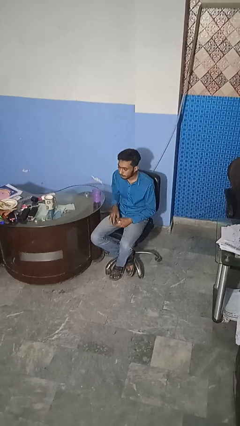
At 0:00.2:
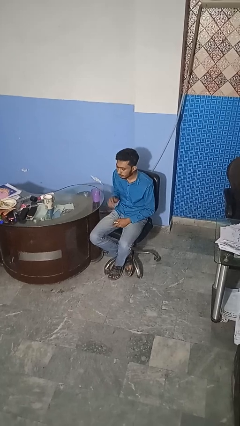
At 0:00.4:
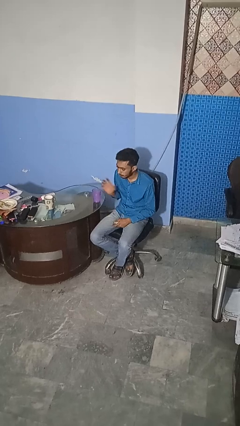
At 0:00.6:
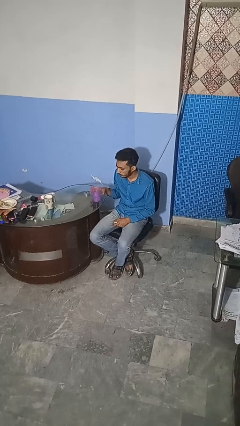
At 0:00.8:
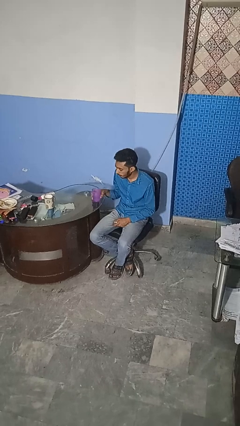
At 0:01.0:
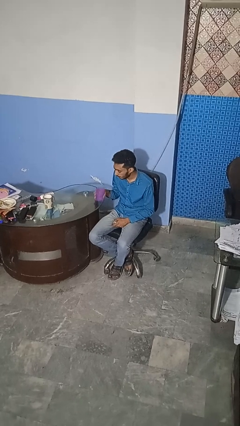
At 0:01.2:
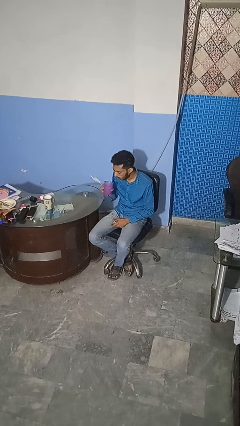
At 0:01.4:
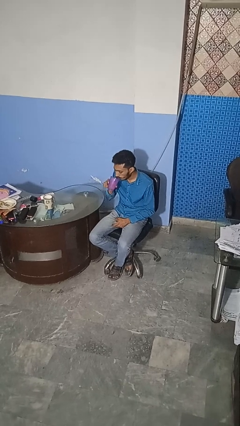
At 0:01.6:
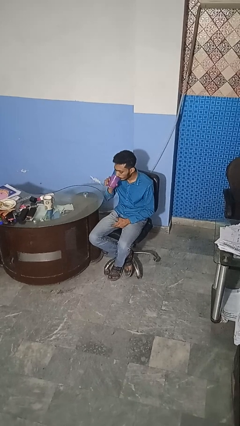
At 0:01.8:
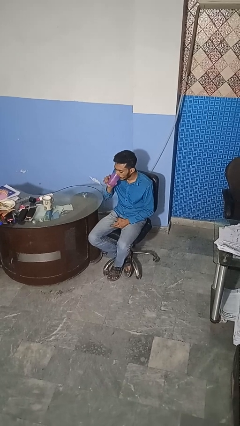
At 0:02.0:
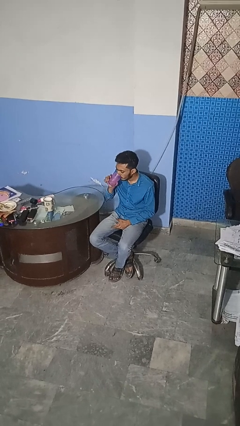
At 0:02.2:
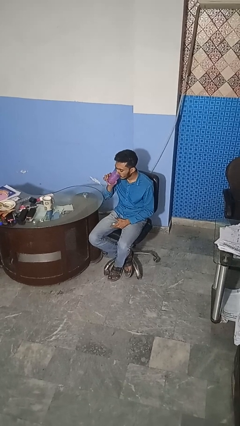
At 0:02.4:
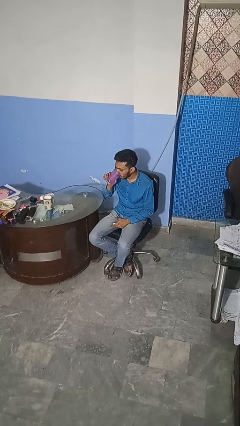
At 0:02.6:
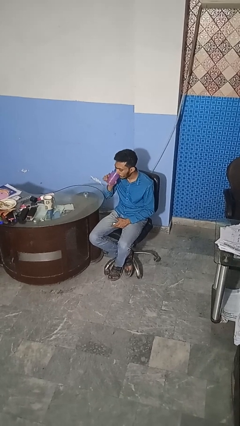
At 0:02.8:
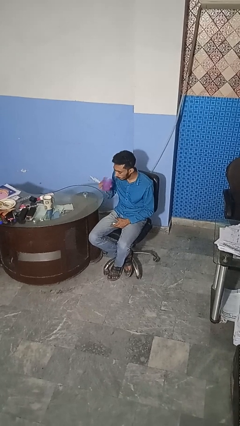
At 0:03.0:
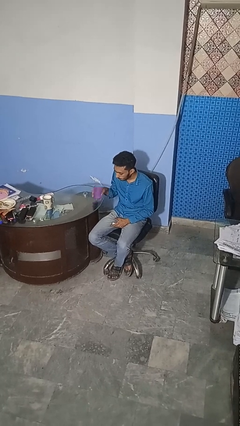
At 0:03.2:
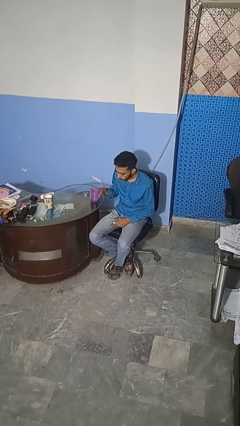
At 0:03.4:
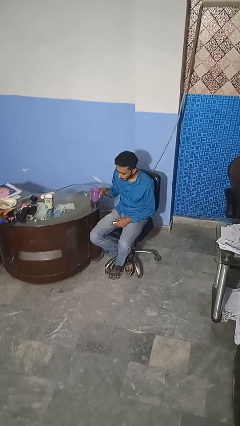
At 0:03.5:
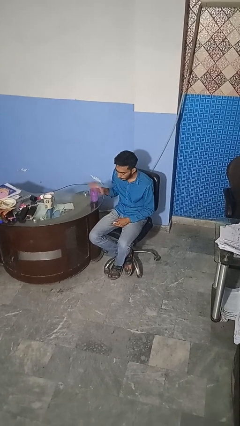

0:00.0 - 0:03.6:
person drinks from cup

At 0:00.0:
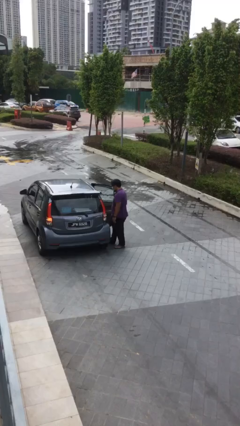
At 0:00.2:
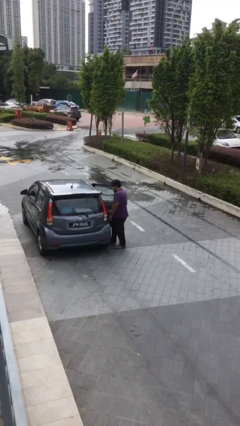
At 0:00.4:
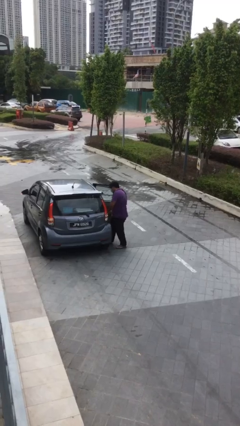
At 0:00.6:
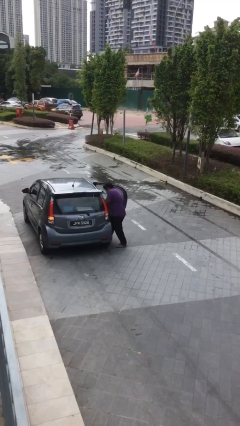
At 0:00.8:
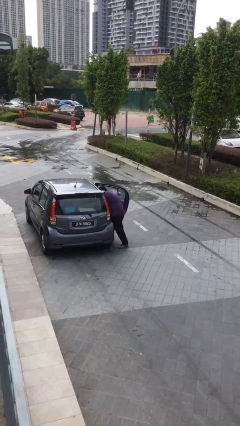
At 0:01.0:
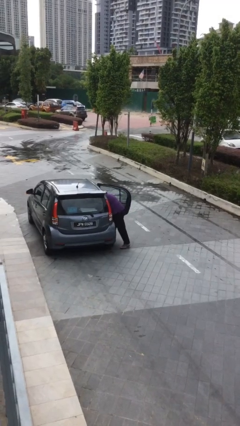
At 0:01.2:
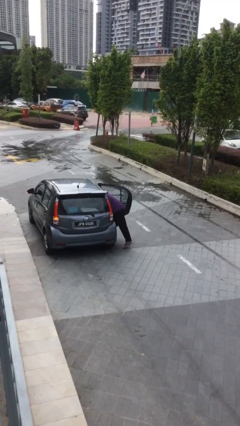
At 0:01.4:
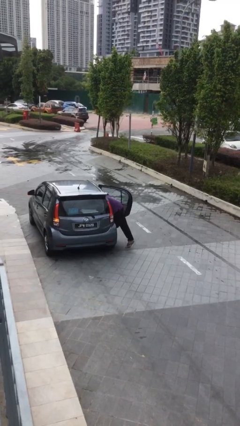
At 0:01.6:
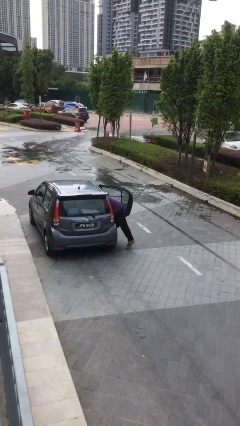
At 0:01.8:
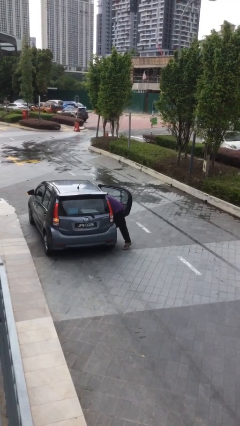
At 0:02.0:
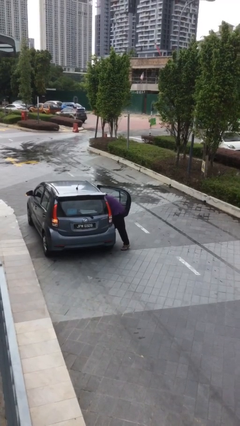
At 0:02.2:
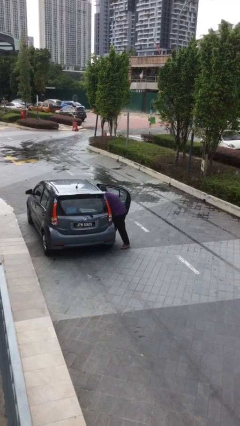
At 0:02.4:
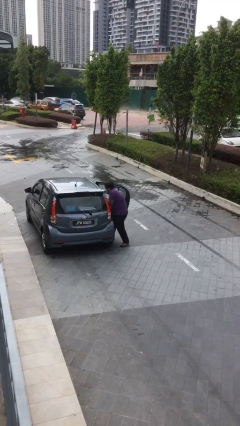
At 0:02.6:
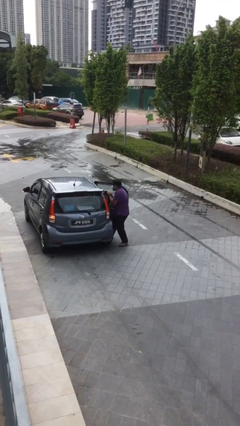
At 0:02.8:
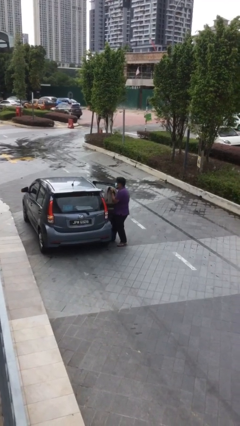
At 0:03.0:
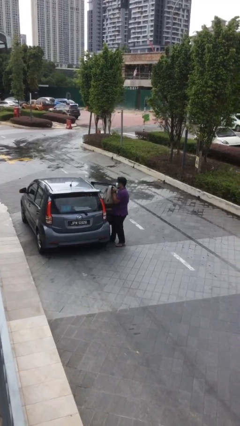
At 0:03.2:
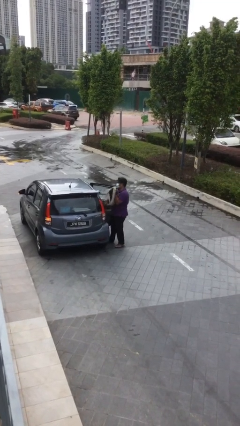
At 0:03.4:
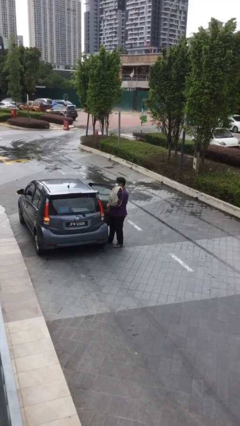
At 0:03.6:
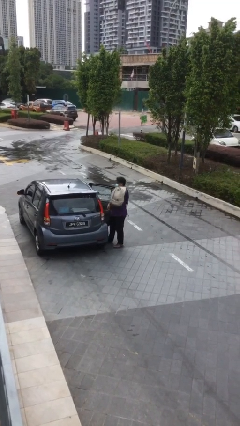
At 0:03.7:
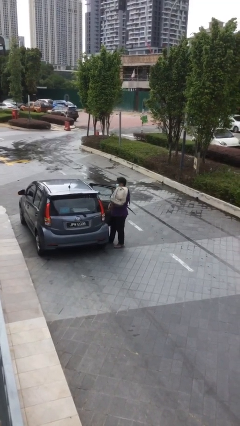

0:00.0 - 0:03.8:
person unloads car

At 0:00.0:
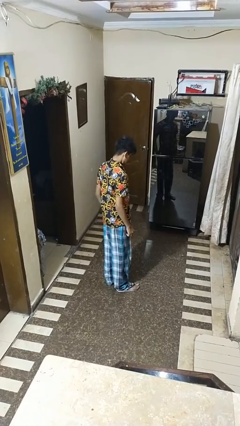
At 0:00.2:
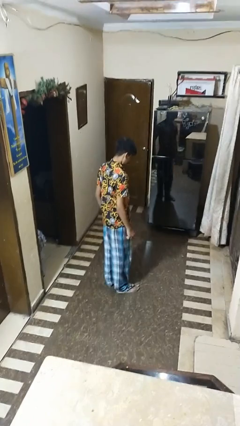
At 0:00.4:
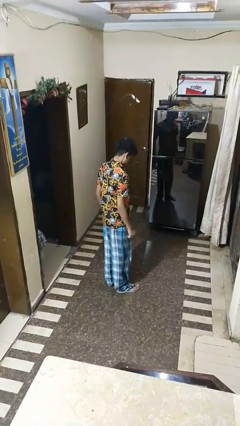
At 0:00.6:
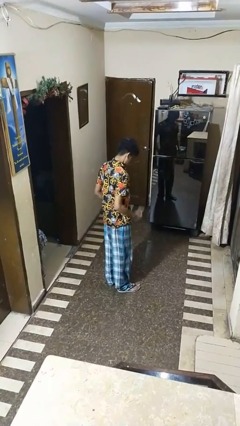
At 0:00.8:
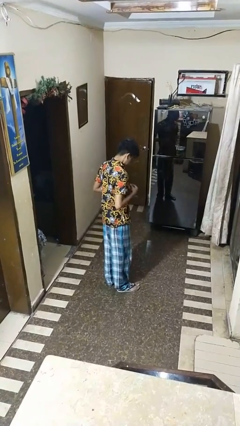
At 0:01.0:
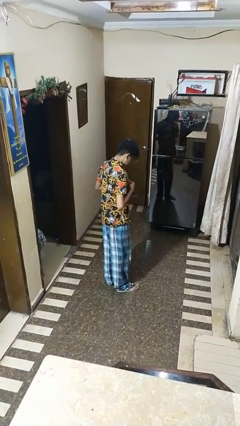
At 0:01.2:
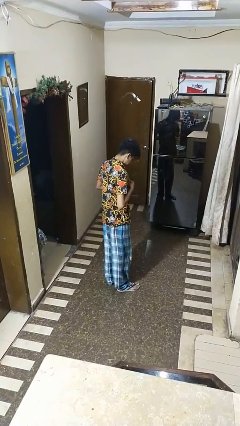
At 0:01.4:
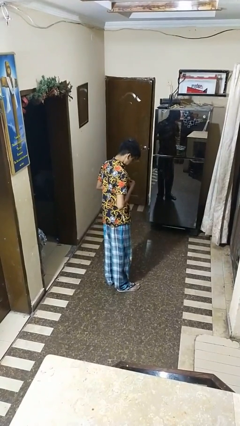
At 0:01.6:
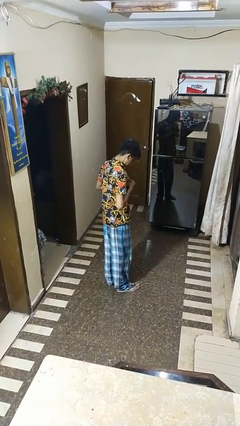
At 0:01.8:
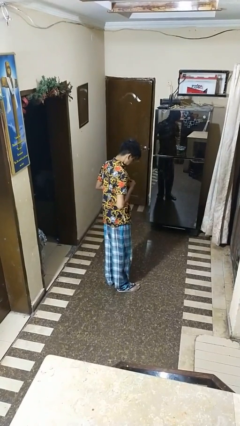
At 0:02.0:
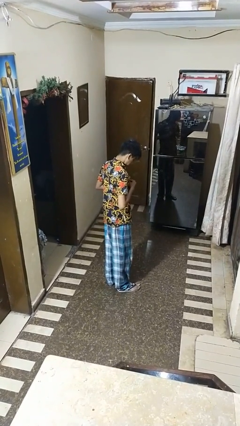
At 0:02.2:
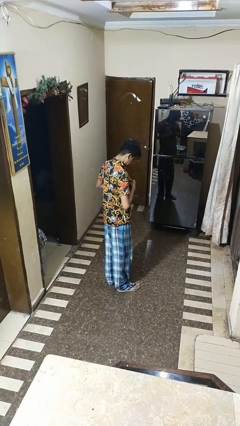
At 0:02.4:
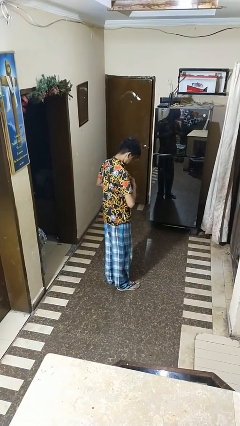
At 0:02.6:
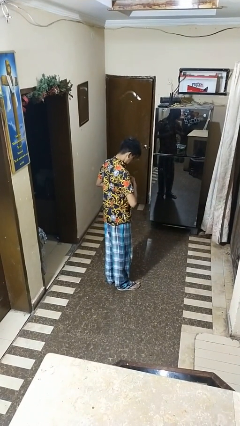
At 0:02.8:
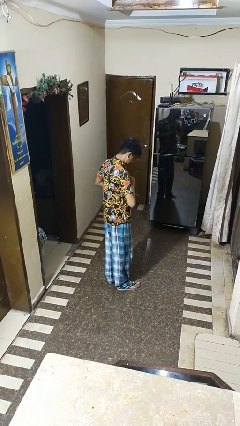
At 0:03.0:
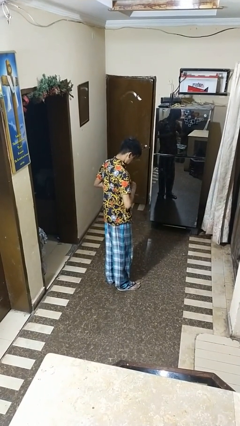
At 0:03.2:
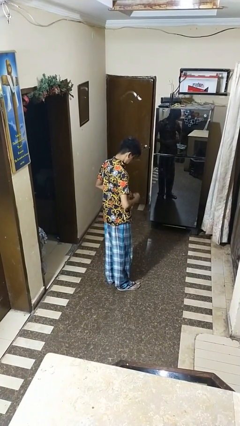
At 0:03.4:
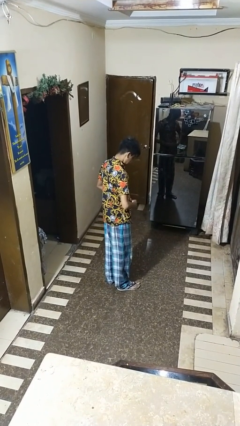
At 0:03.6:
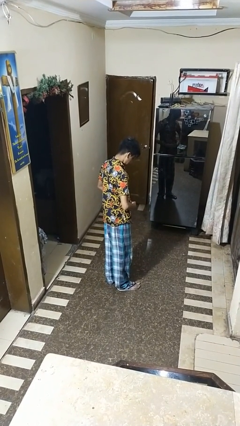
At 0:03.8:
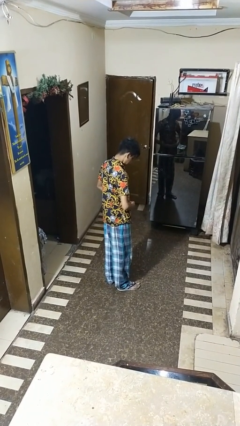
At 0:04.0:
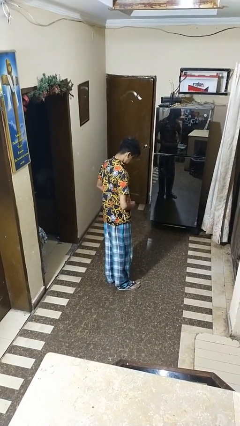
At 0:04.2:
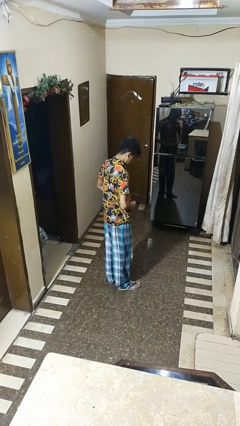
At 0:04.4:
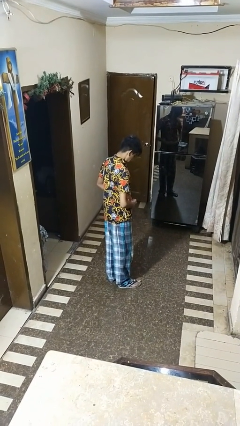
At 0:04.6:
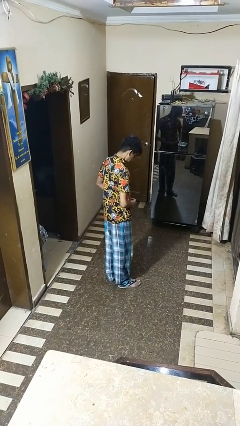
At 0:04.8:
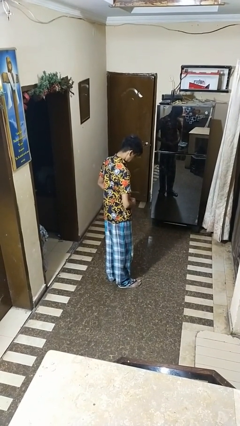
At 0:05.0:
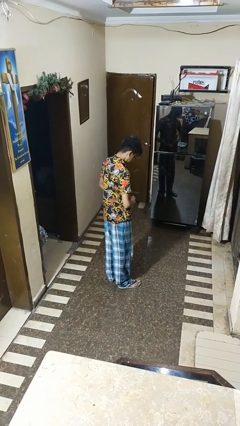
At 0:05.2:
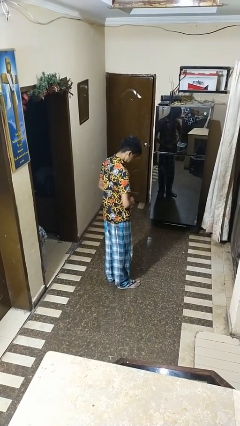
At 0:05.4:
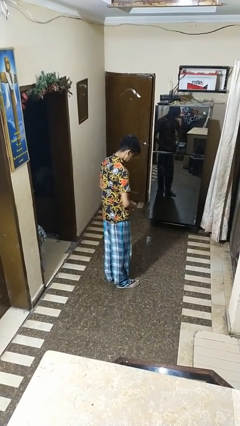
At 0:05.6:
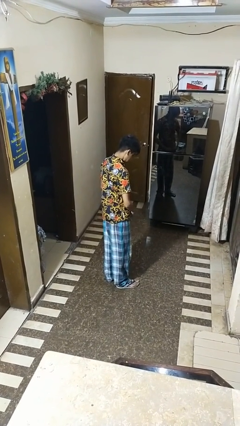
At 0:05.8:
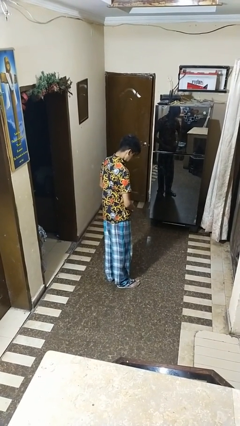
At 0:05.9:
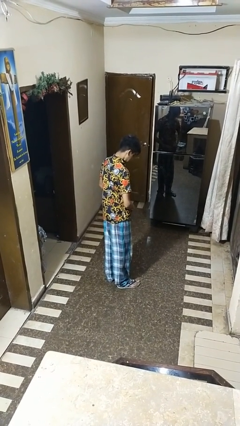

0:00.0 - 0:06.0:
person buttons shirt

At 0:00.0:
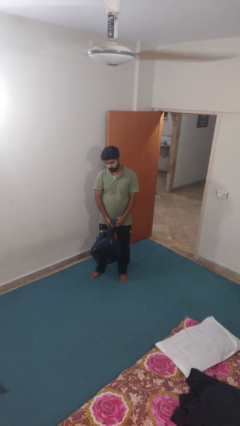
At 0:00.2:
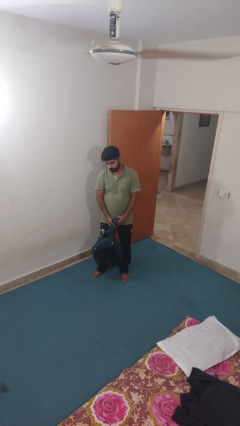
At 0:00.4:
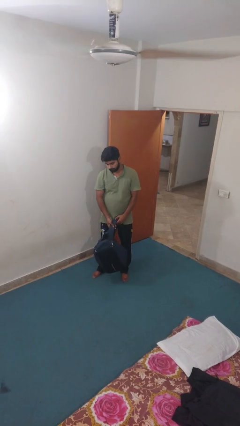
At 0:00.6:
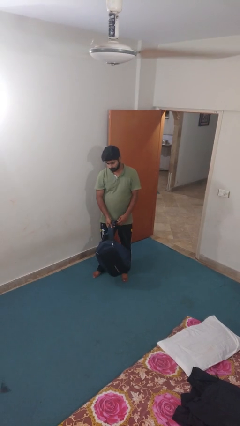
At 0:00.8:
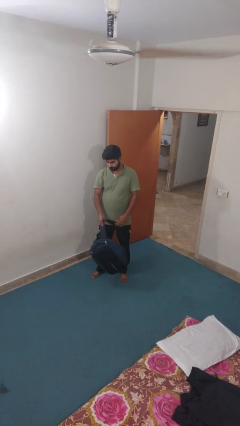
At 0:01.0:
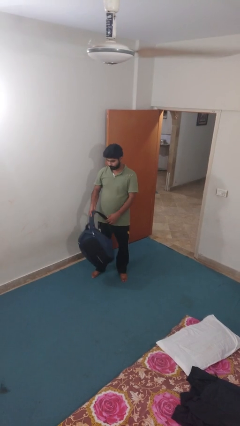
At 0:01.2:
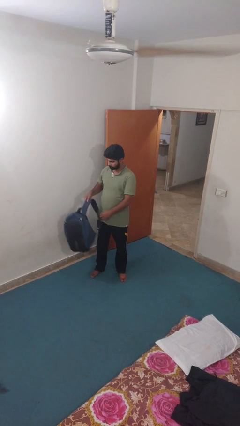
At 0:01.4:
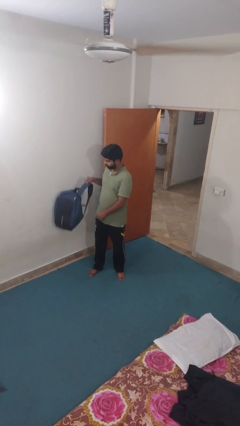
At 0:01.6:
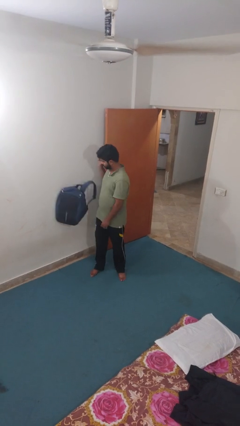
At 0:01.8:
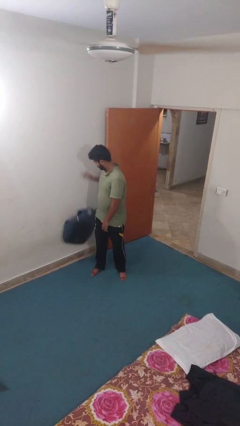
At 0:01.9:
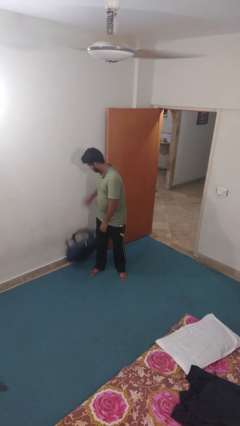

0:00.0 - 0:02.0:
person drops object

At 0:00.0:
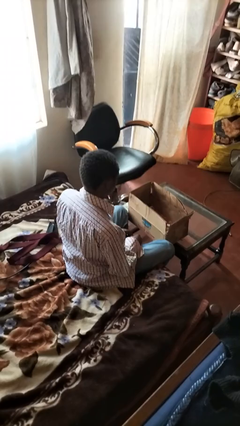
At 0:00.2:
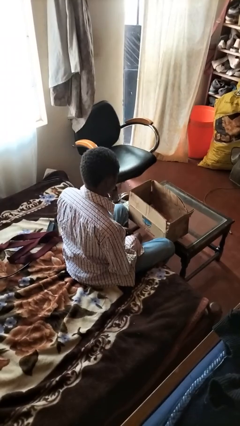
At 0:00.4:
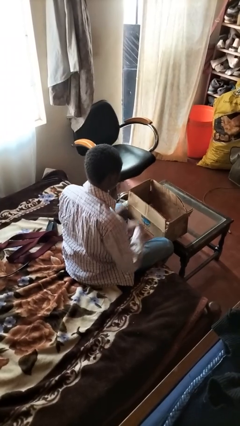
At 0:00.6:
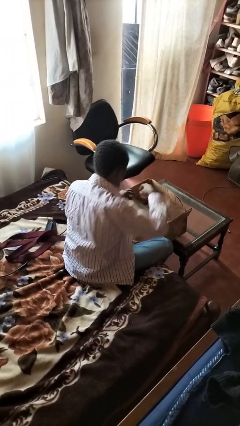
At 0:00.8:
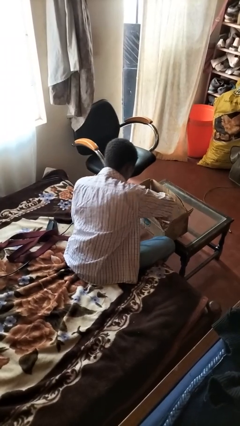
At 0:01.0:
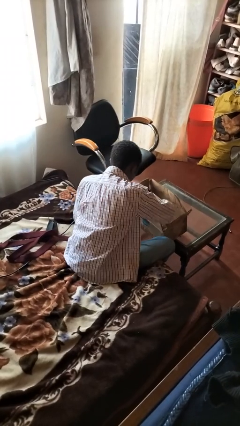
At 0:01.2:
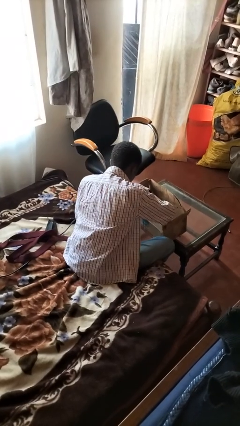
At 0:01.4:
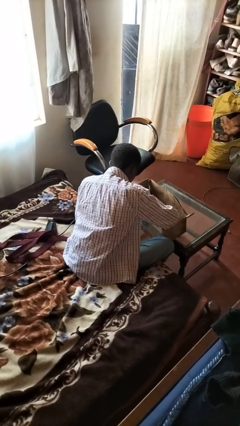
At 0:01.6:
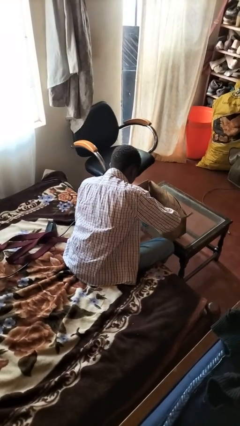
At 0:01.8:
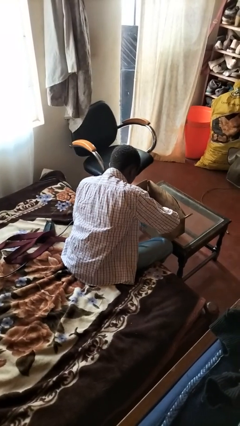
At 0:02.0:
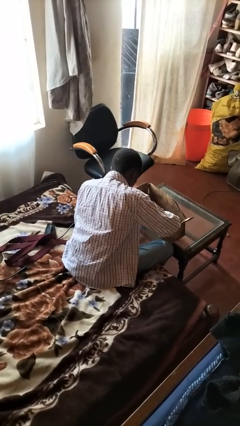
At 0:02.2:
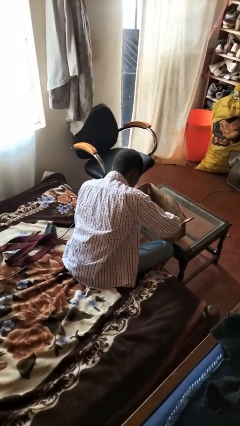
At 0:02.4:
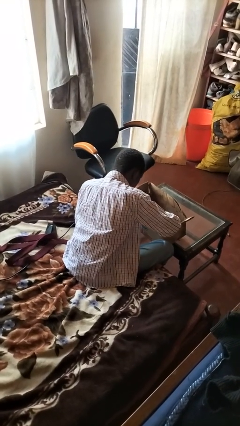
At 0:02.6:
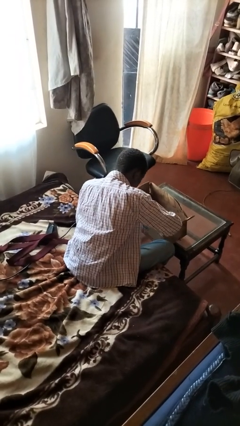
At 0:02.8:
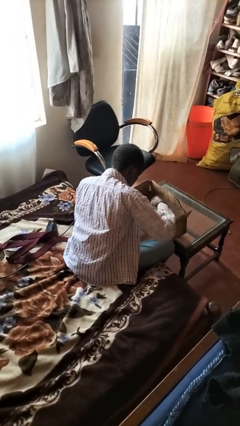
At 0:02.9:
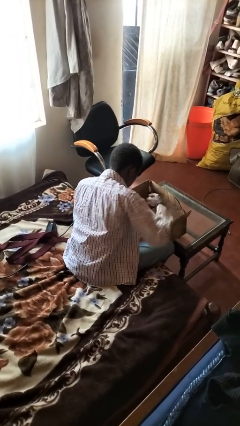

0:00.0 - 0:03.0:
person searches in box
